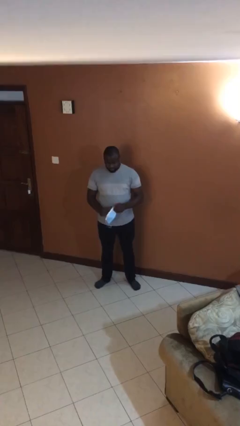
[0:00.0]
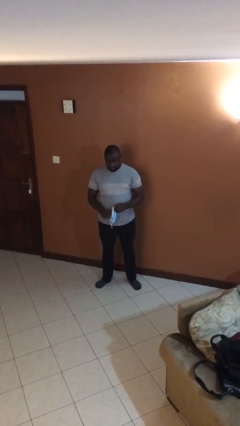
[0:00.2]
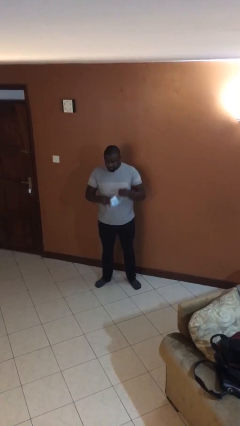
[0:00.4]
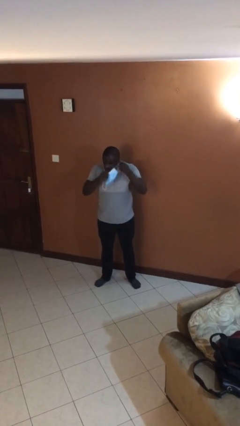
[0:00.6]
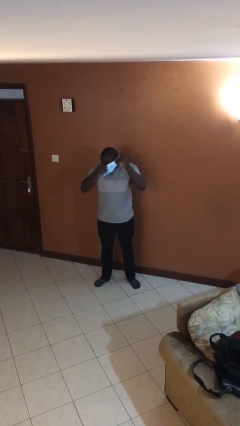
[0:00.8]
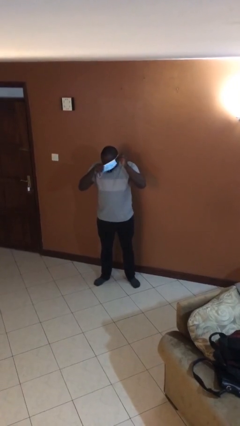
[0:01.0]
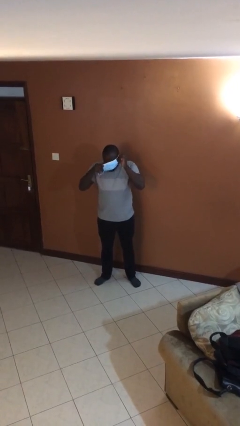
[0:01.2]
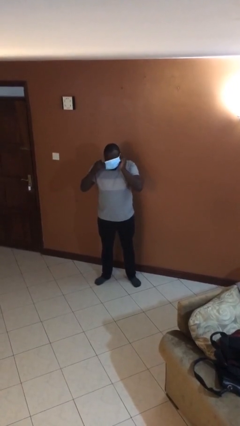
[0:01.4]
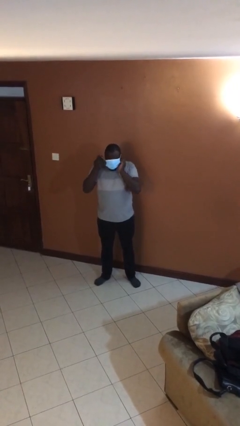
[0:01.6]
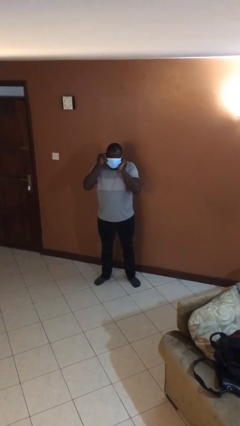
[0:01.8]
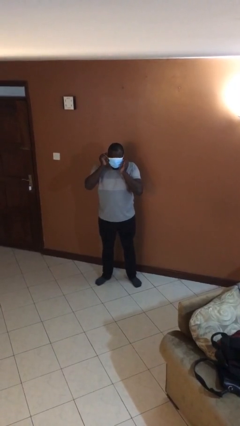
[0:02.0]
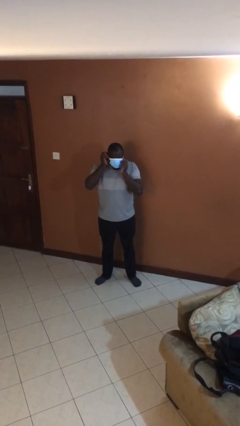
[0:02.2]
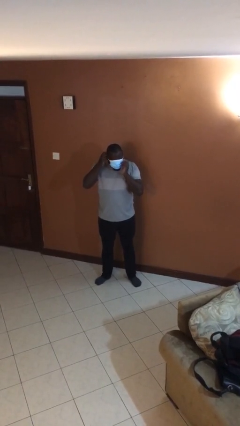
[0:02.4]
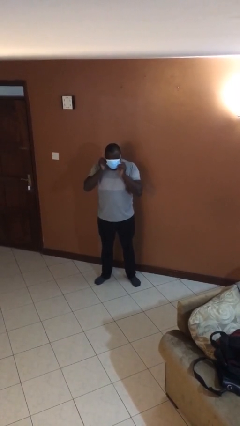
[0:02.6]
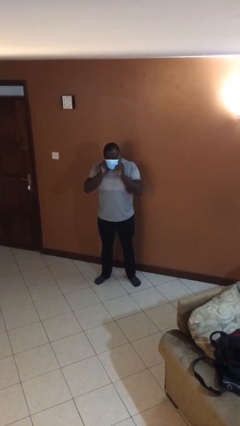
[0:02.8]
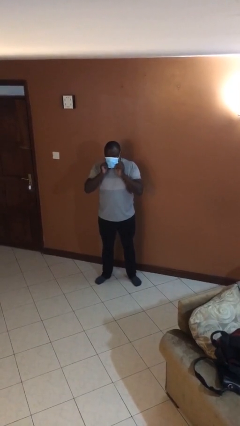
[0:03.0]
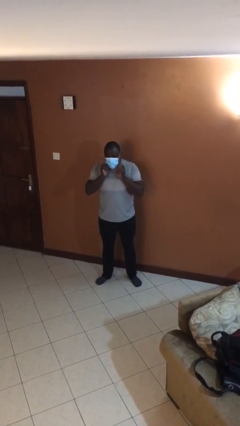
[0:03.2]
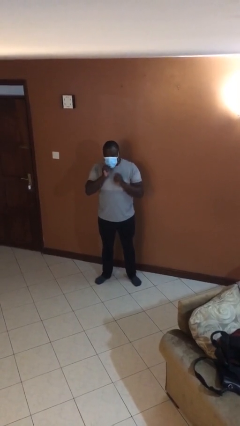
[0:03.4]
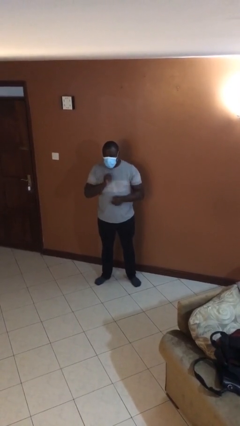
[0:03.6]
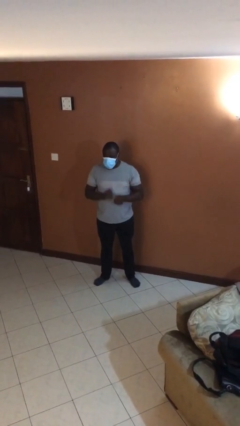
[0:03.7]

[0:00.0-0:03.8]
person puts on facemask

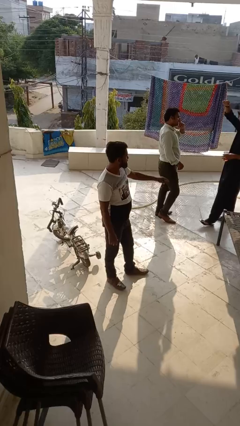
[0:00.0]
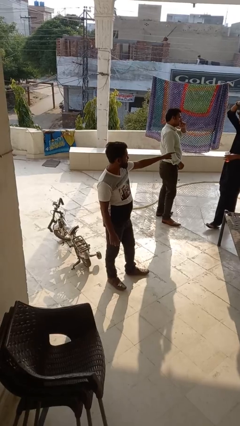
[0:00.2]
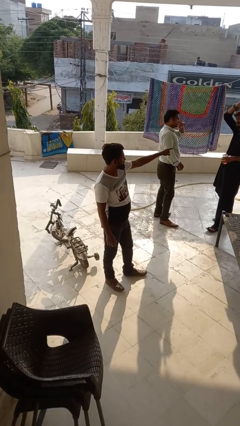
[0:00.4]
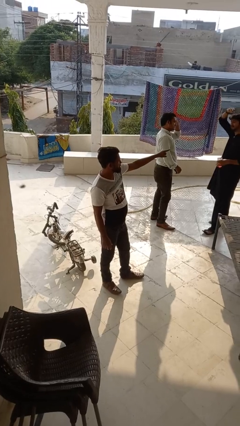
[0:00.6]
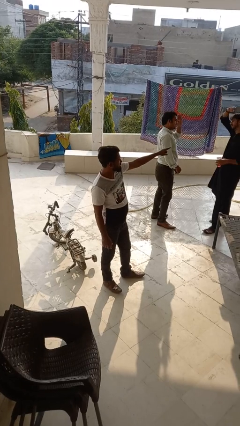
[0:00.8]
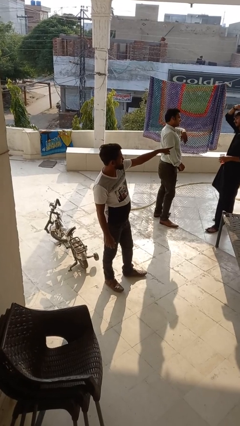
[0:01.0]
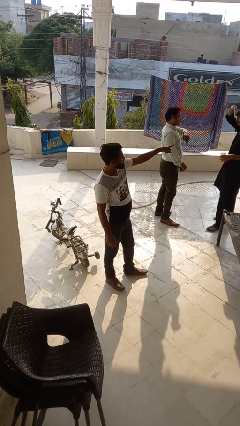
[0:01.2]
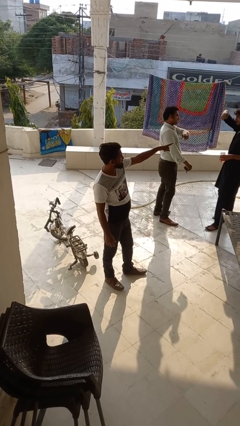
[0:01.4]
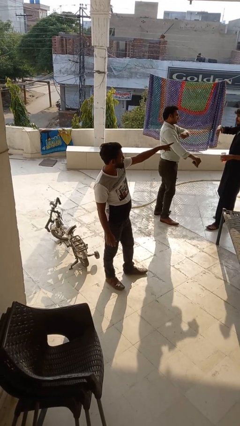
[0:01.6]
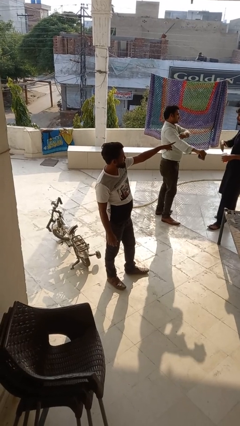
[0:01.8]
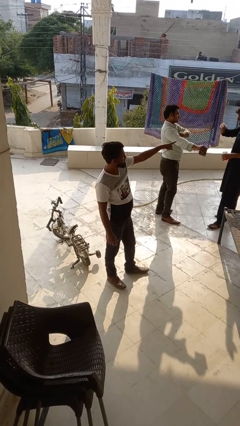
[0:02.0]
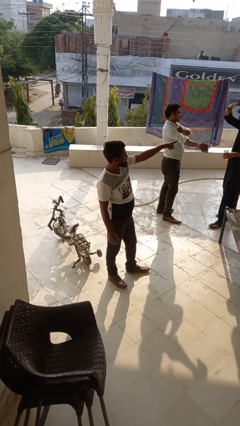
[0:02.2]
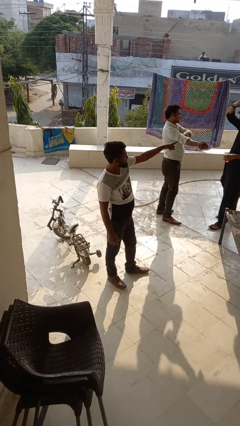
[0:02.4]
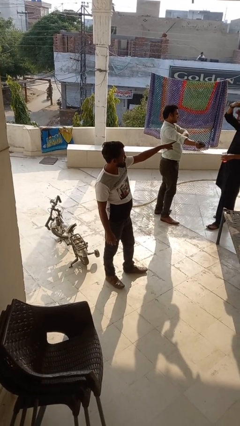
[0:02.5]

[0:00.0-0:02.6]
person points at person

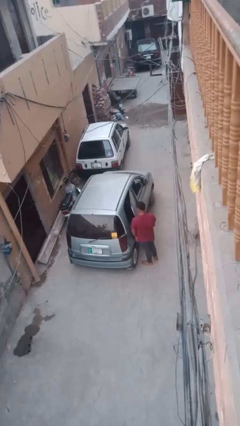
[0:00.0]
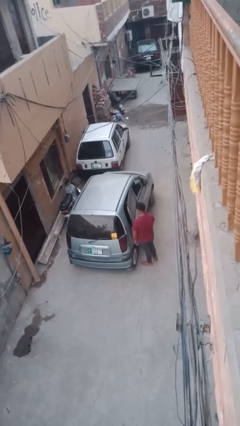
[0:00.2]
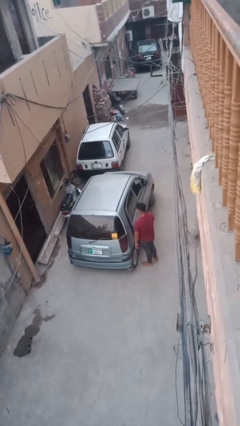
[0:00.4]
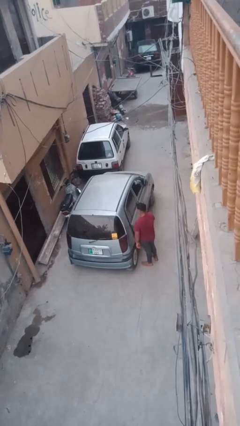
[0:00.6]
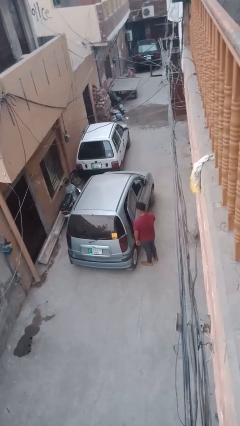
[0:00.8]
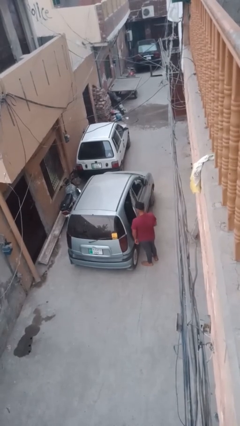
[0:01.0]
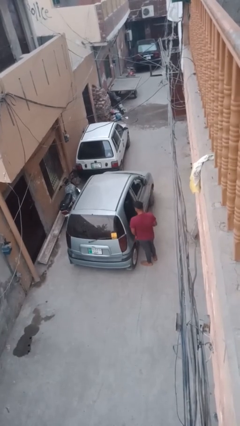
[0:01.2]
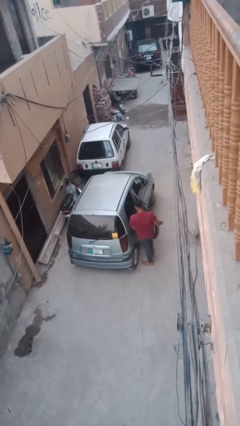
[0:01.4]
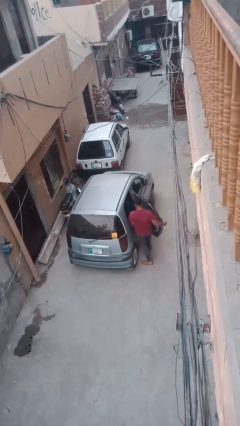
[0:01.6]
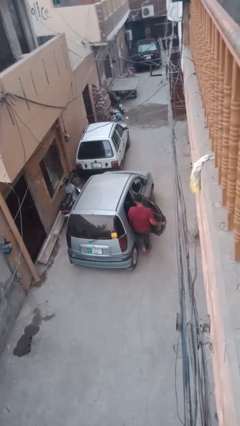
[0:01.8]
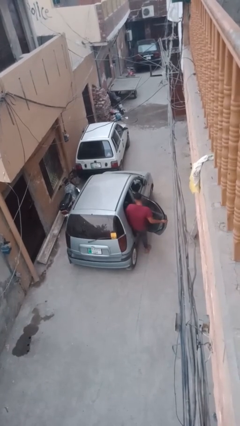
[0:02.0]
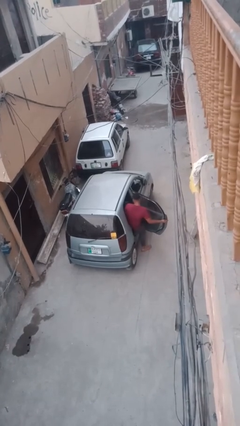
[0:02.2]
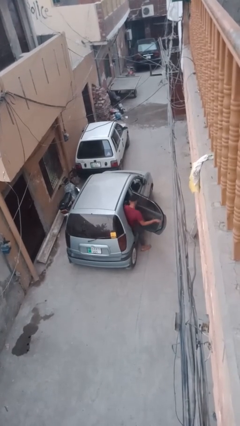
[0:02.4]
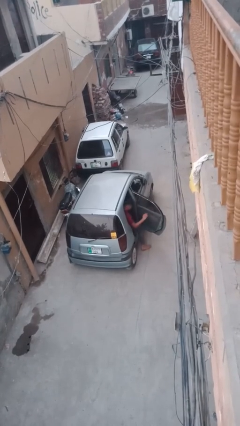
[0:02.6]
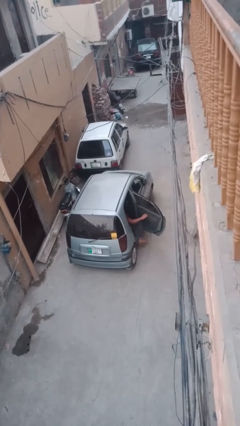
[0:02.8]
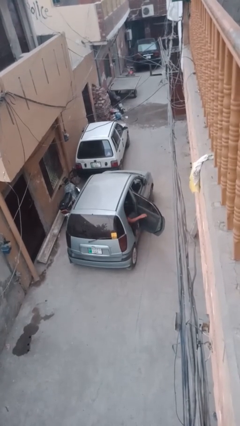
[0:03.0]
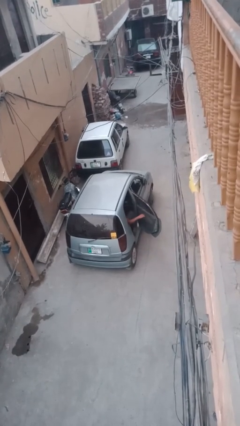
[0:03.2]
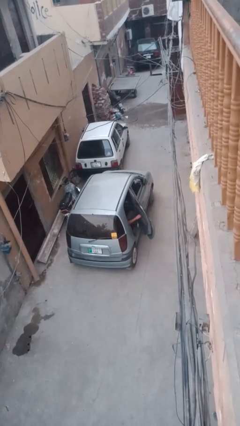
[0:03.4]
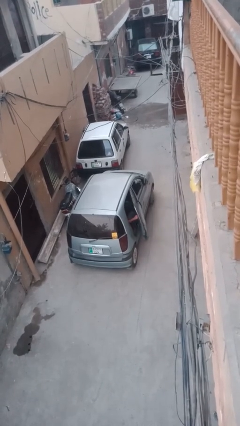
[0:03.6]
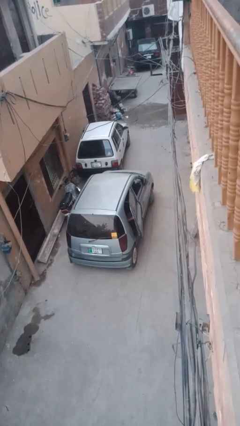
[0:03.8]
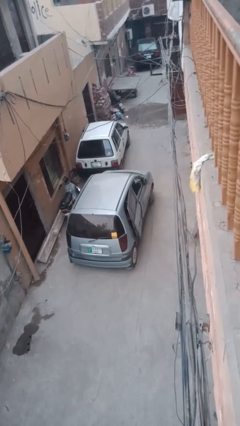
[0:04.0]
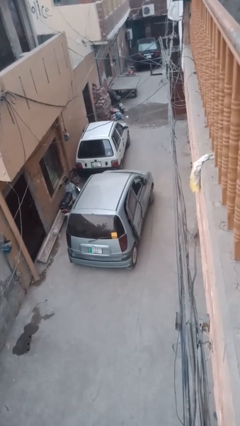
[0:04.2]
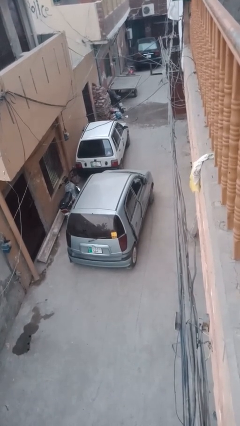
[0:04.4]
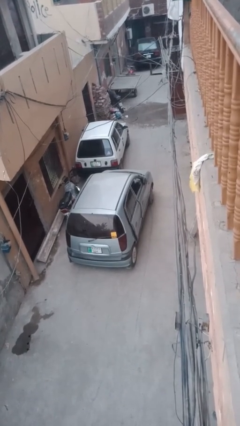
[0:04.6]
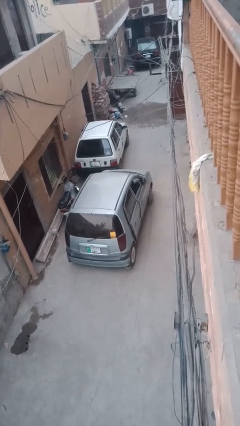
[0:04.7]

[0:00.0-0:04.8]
car picks up person

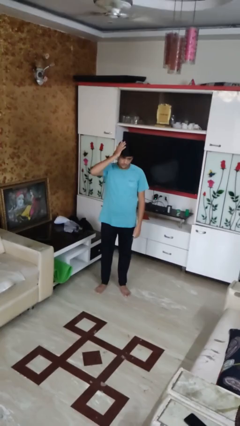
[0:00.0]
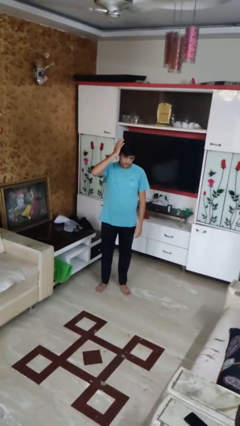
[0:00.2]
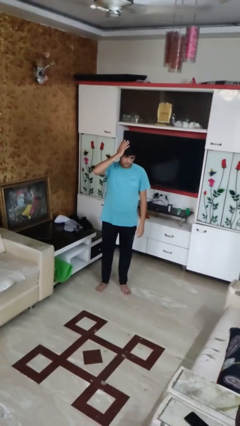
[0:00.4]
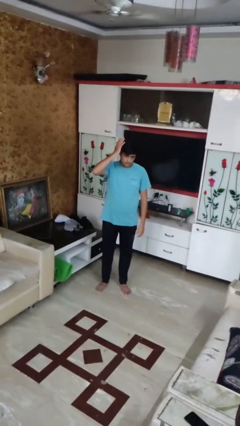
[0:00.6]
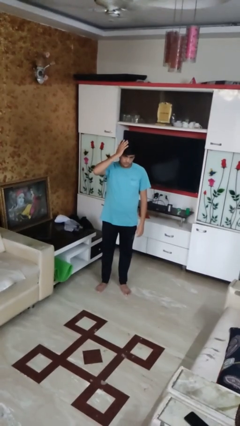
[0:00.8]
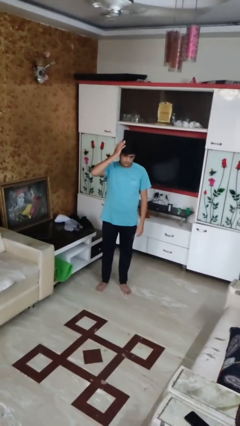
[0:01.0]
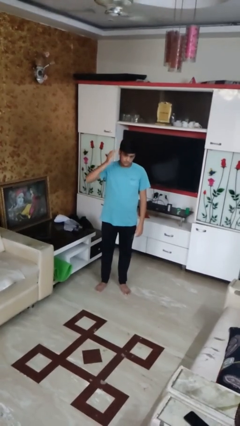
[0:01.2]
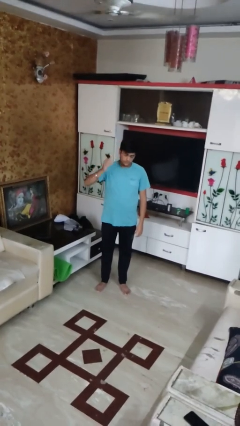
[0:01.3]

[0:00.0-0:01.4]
person pats head

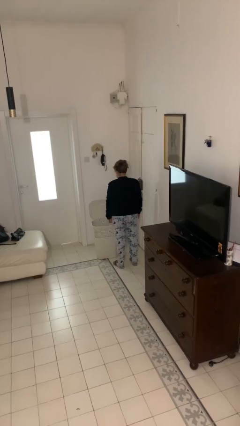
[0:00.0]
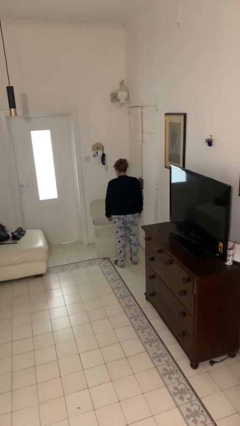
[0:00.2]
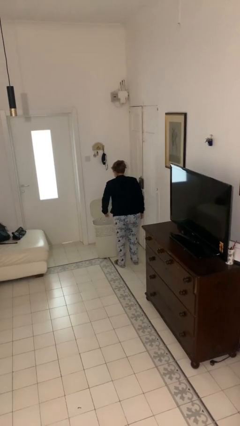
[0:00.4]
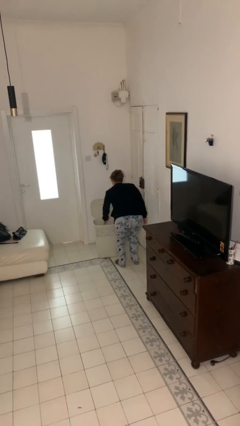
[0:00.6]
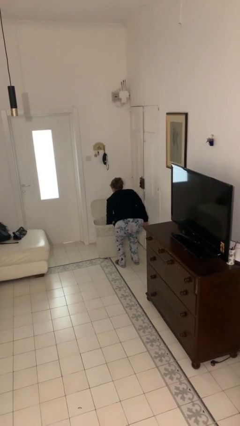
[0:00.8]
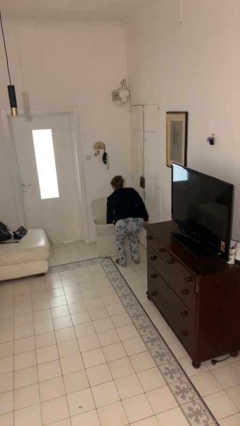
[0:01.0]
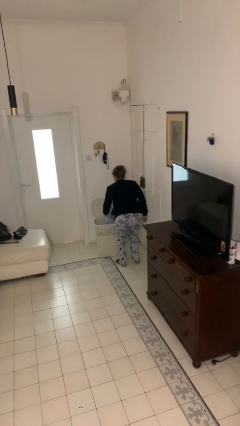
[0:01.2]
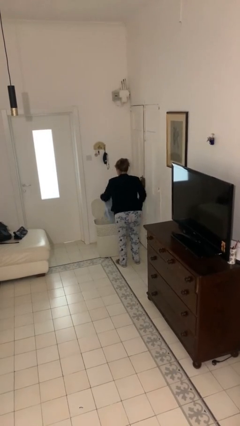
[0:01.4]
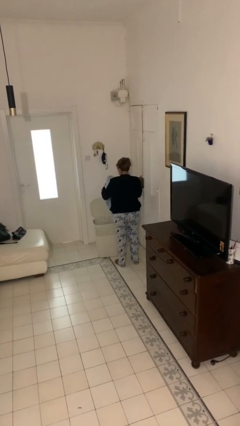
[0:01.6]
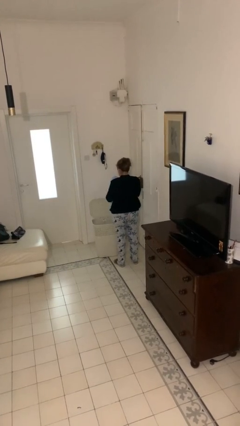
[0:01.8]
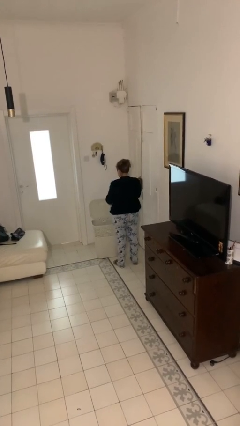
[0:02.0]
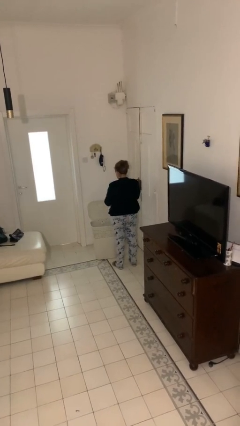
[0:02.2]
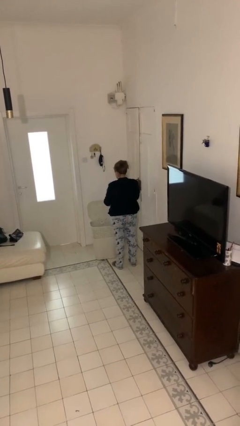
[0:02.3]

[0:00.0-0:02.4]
person takes object from basket

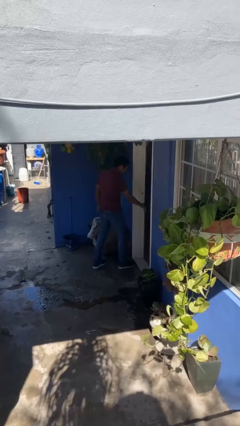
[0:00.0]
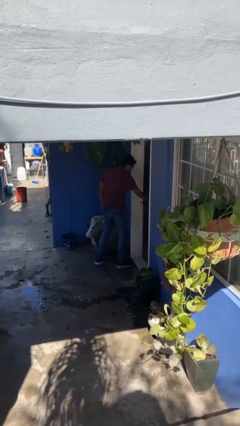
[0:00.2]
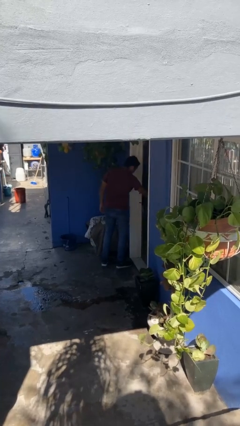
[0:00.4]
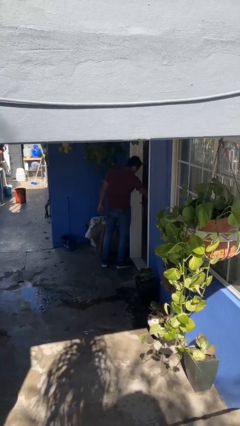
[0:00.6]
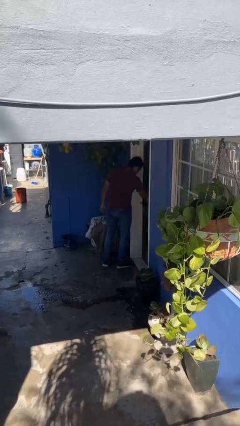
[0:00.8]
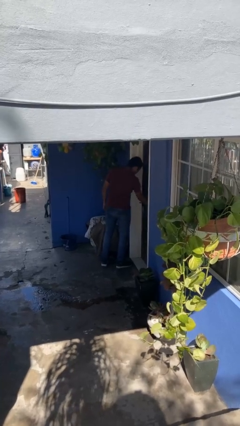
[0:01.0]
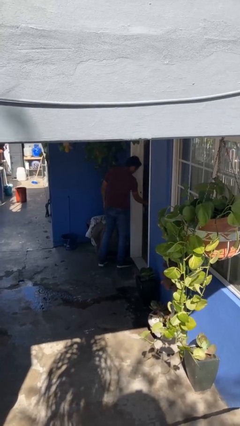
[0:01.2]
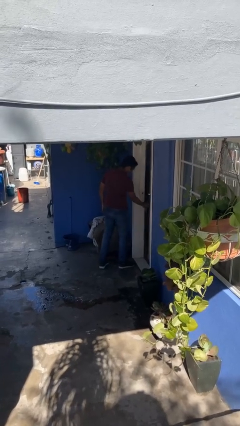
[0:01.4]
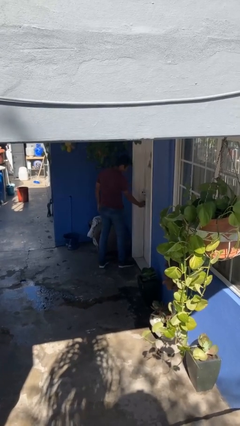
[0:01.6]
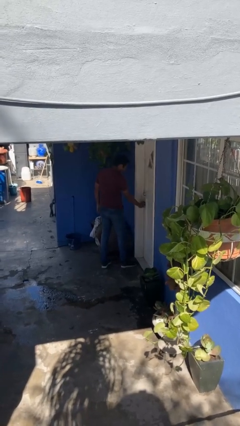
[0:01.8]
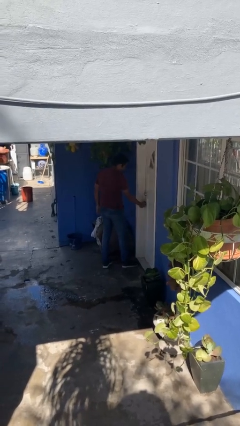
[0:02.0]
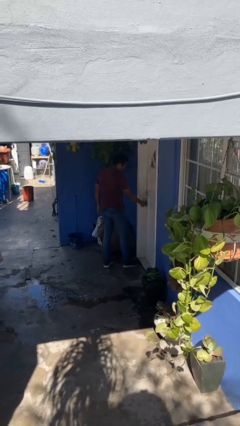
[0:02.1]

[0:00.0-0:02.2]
person closes facility door

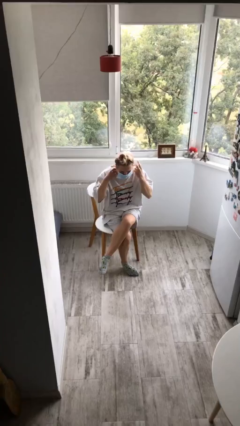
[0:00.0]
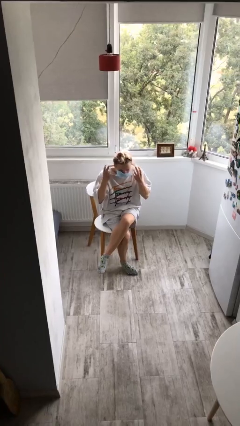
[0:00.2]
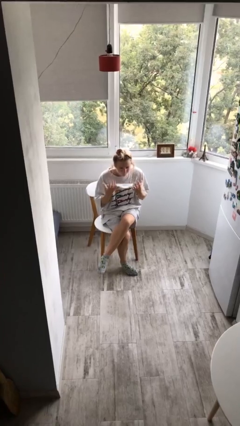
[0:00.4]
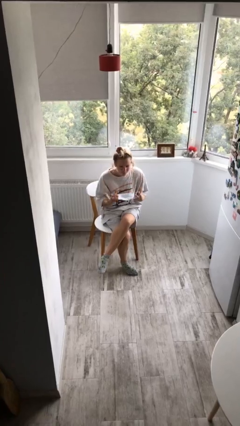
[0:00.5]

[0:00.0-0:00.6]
person takes off facemask
